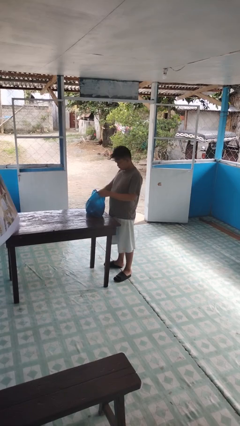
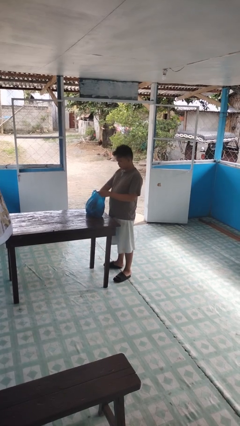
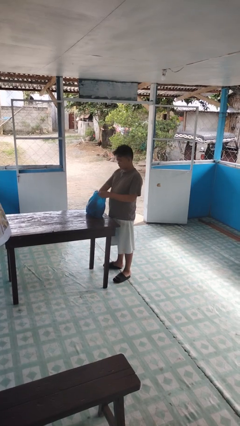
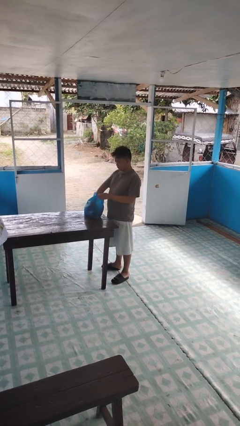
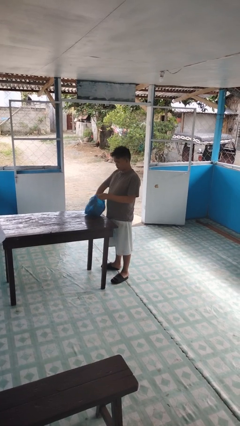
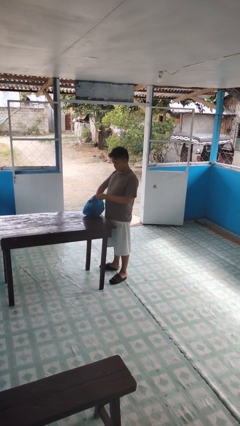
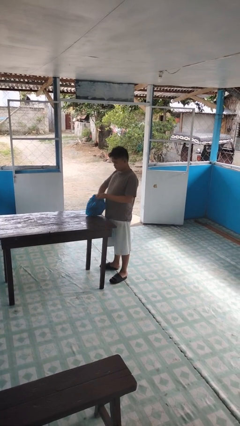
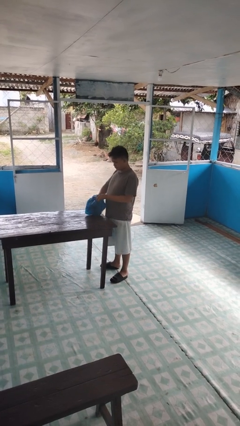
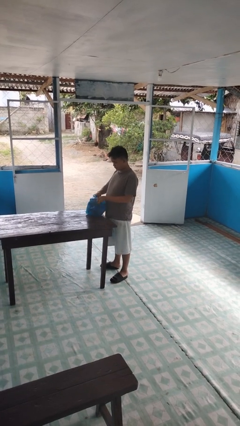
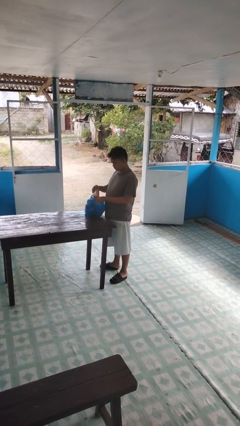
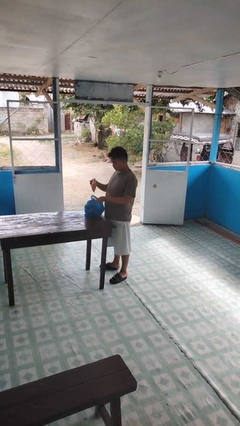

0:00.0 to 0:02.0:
person takes object from bag

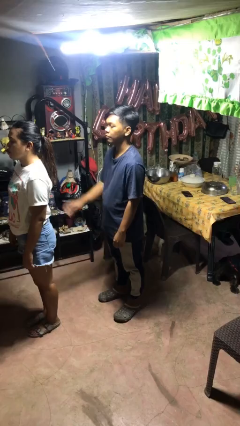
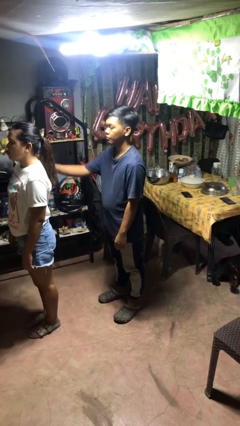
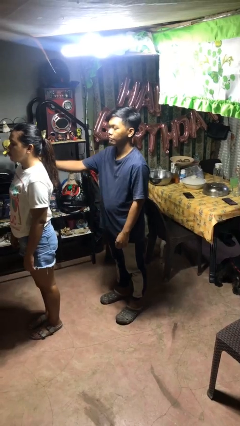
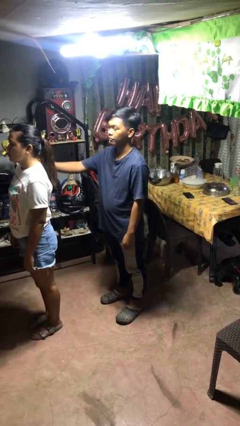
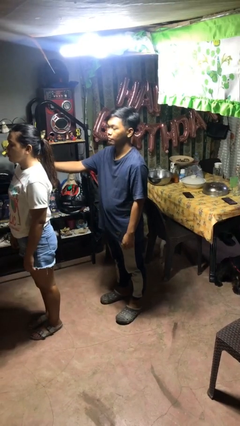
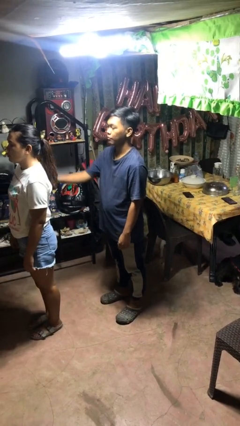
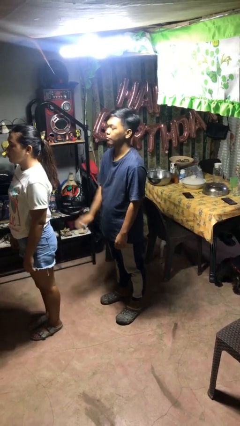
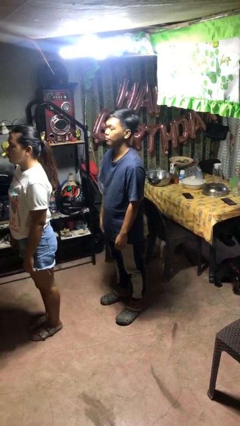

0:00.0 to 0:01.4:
person pounds shoulders of person

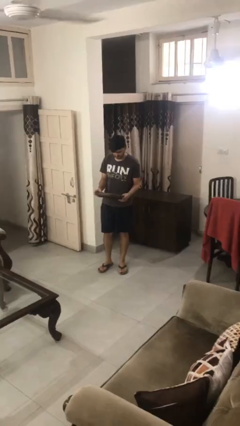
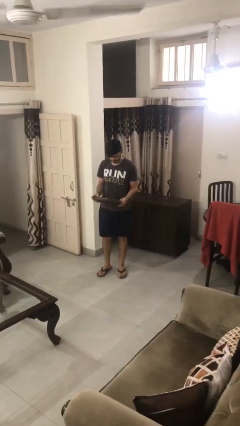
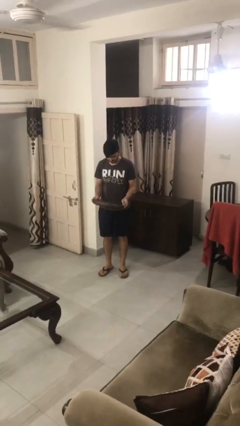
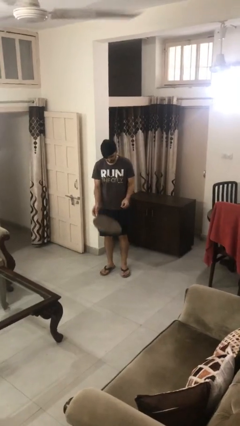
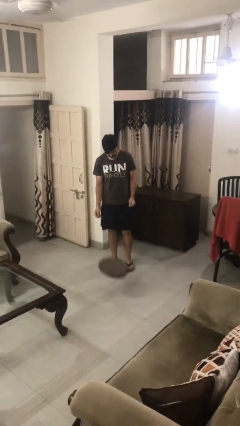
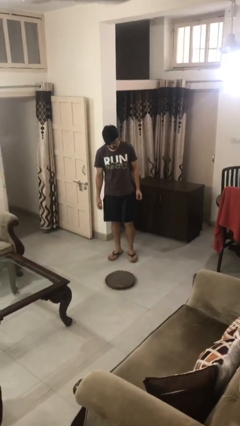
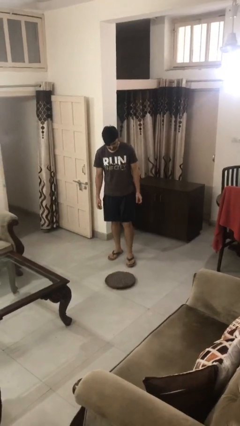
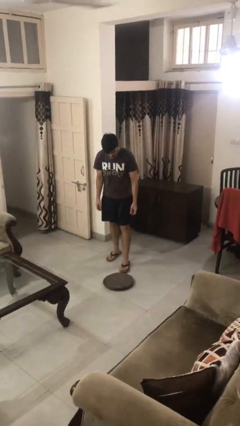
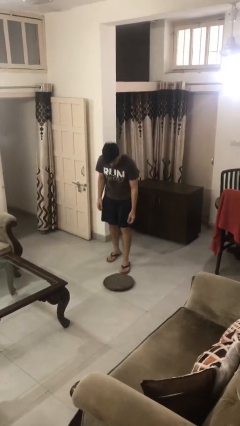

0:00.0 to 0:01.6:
person drops object

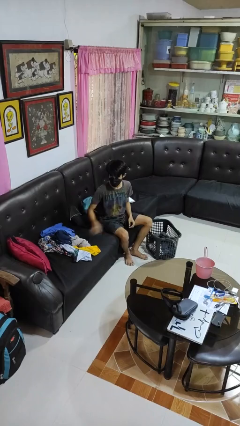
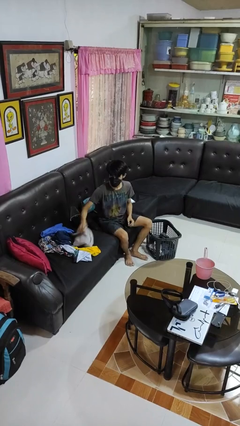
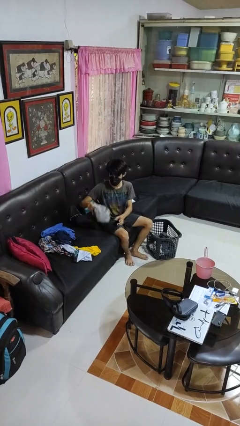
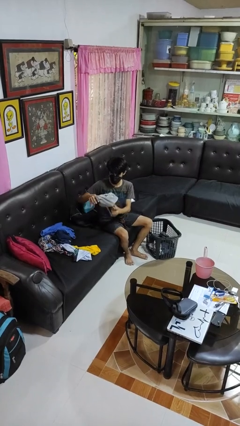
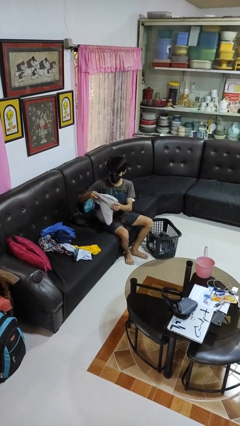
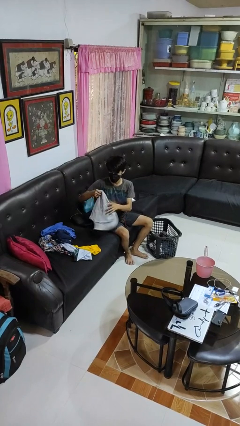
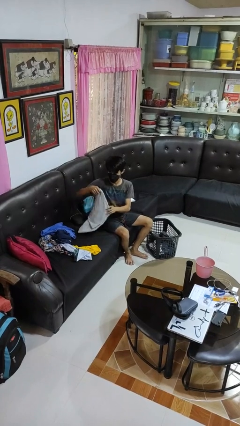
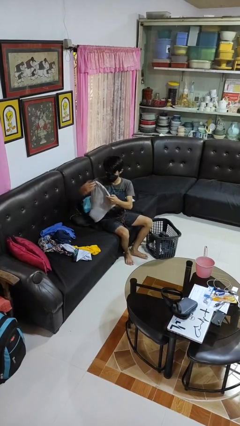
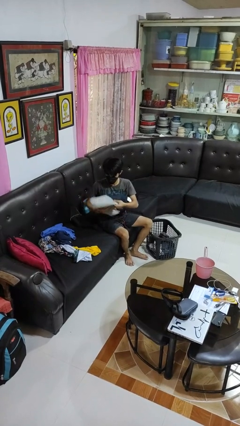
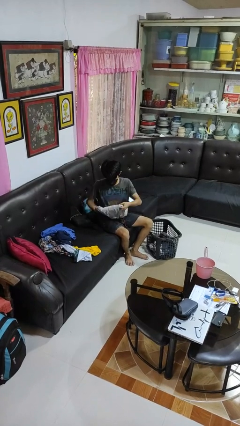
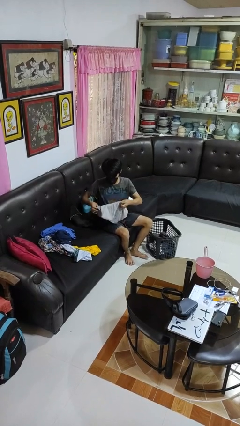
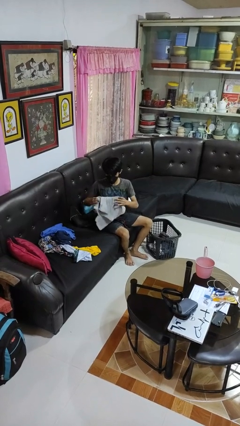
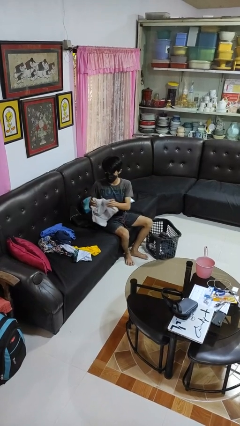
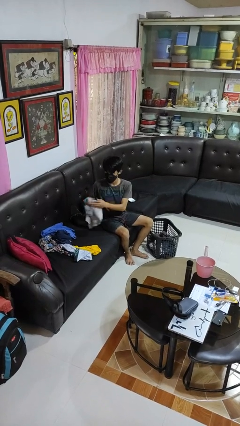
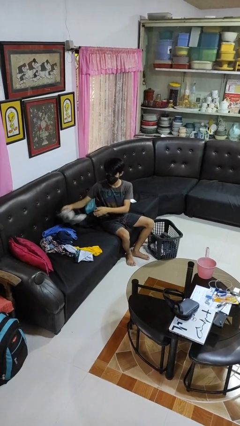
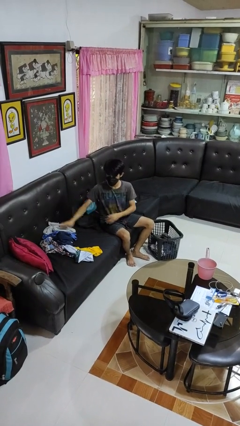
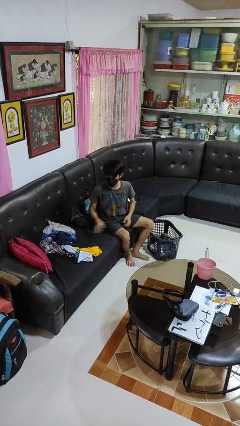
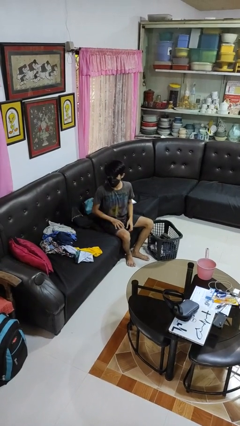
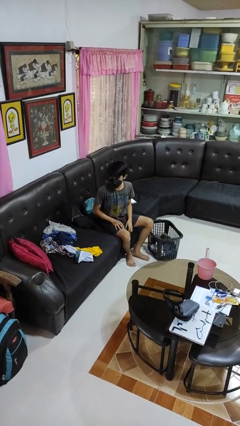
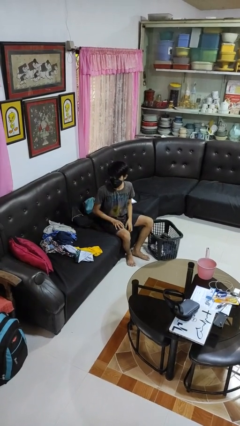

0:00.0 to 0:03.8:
person folds shirt

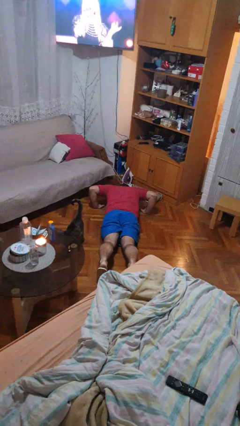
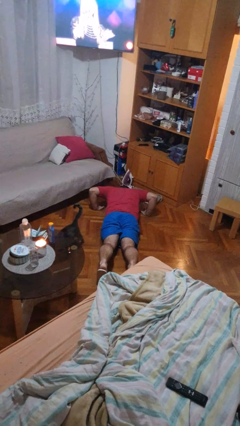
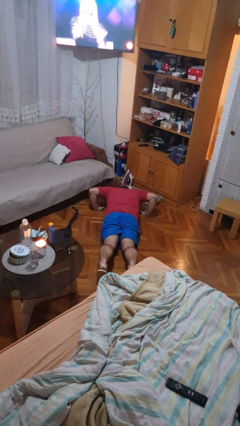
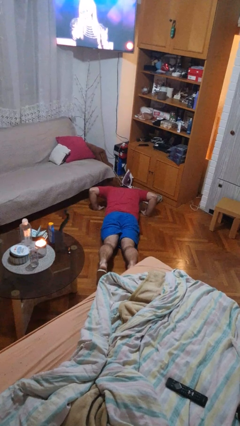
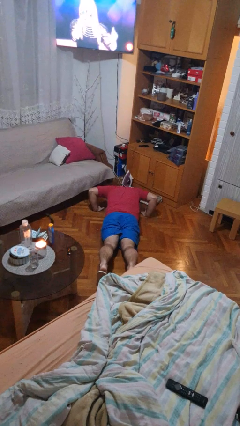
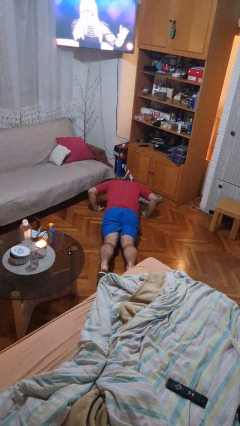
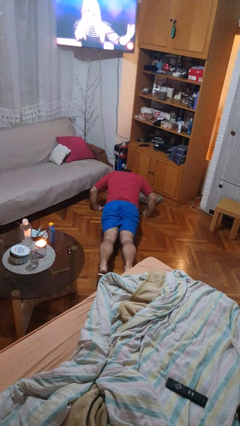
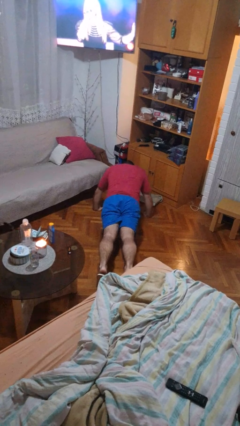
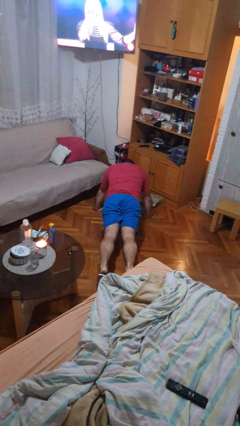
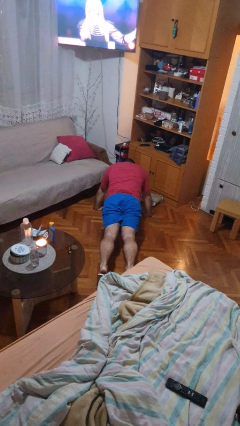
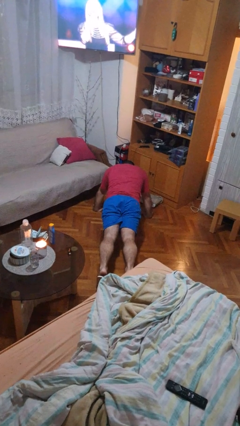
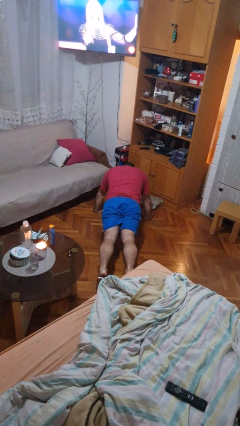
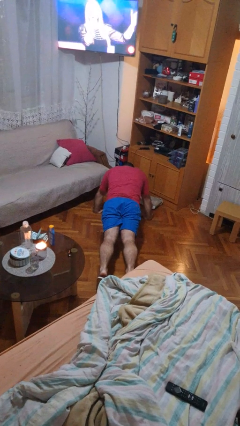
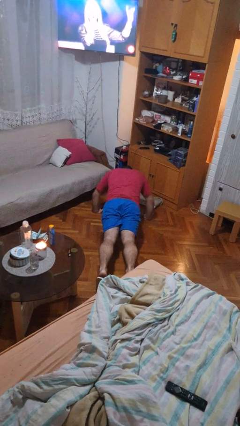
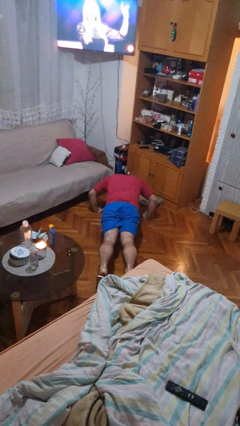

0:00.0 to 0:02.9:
person exercises with pushup

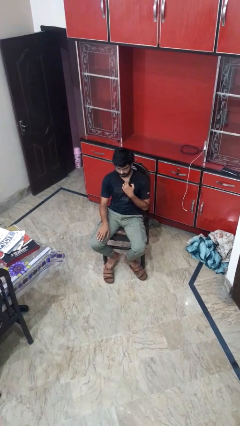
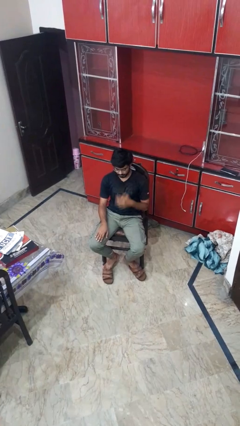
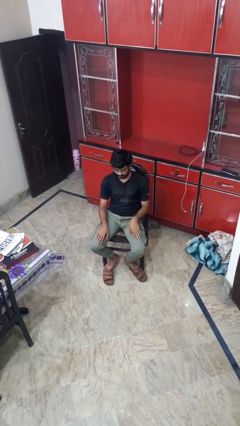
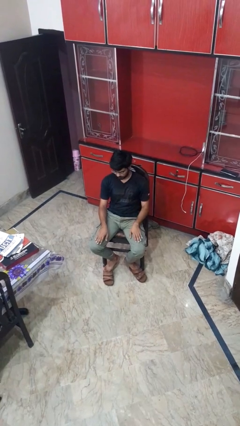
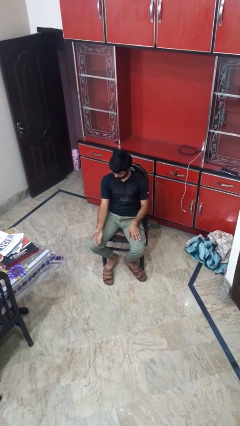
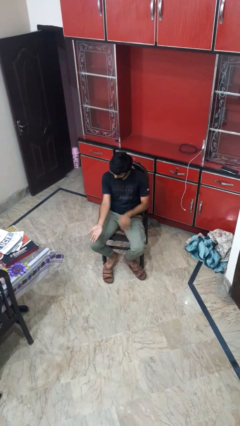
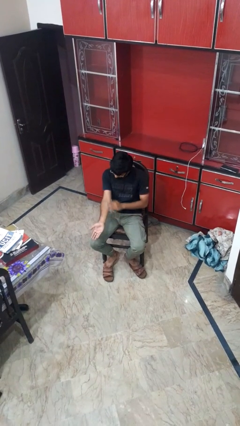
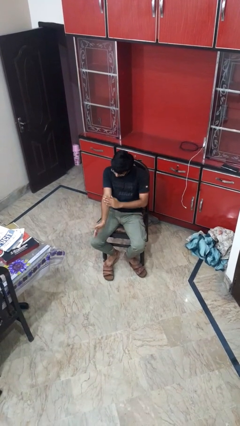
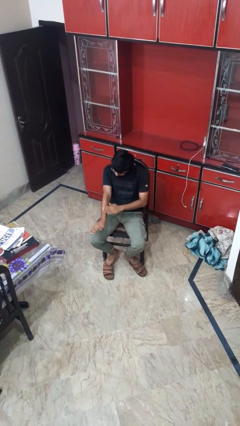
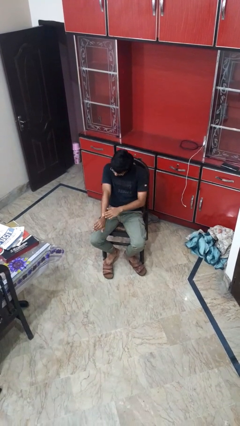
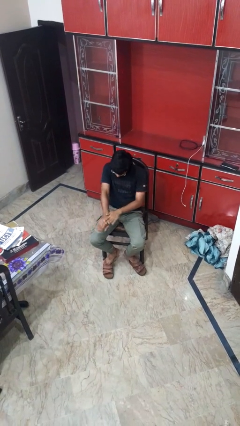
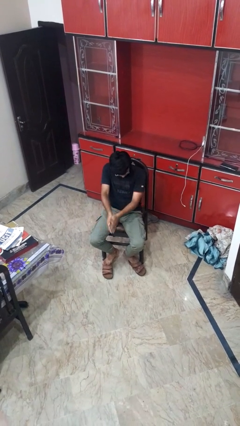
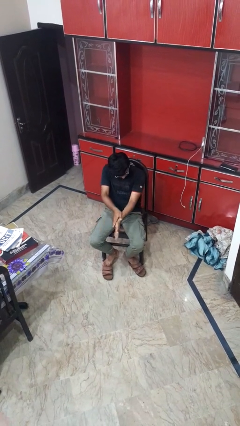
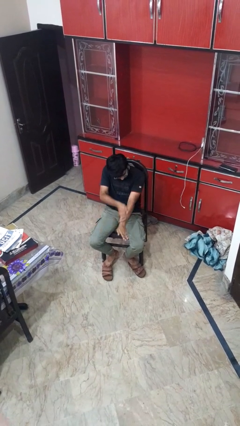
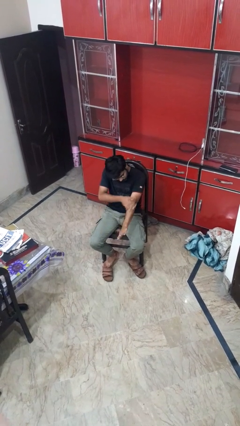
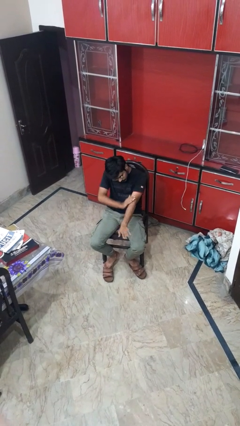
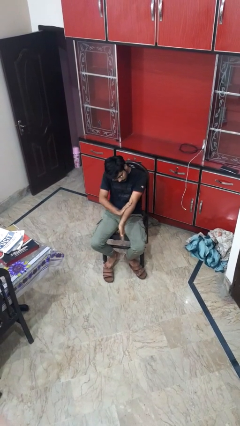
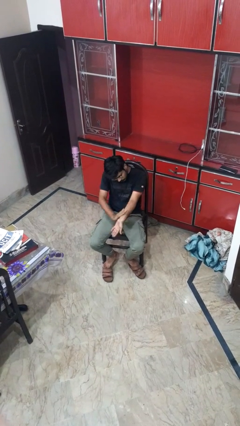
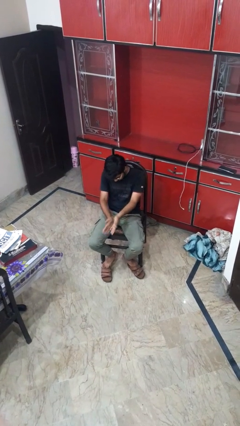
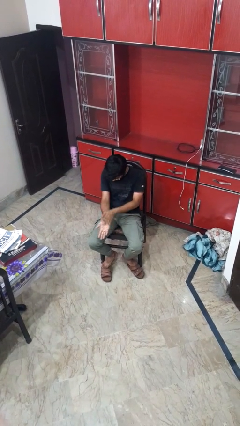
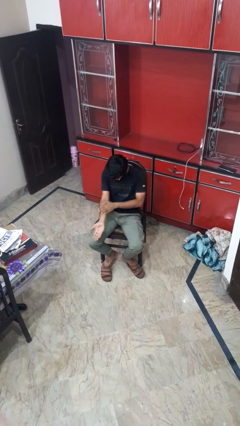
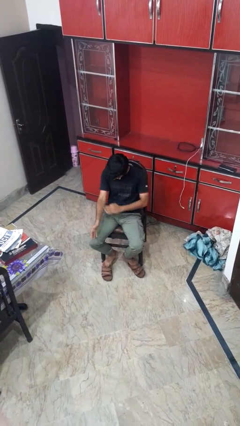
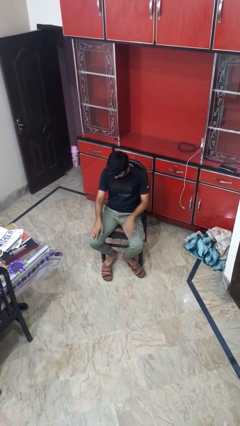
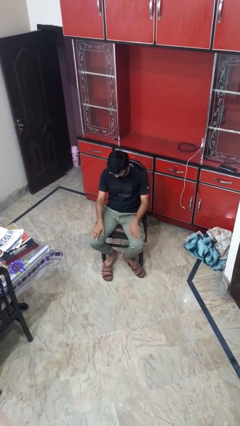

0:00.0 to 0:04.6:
person looks at hands in lap

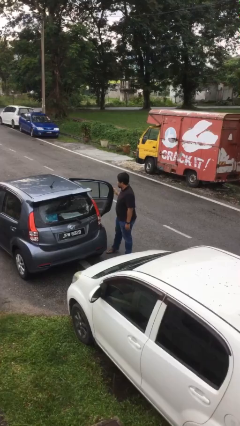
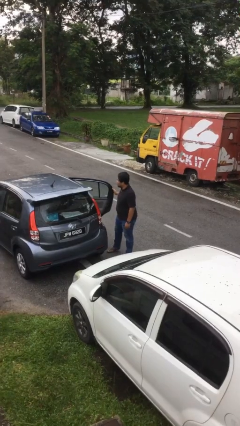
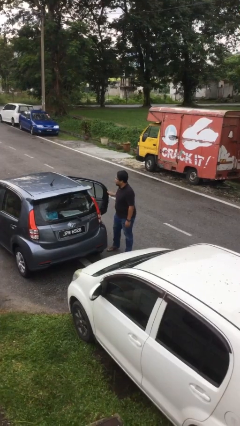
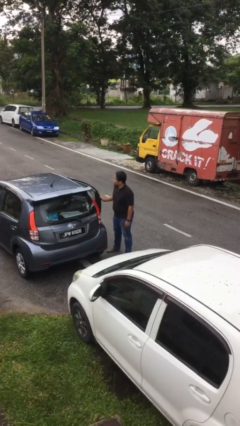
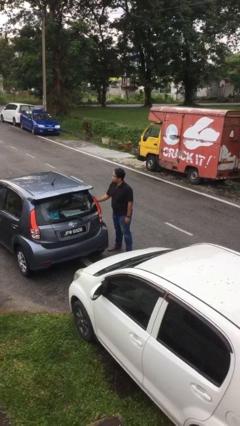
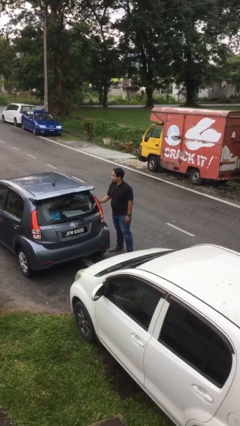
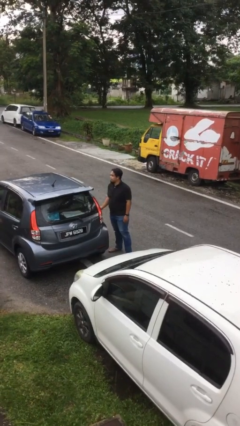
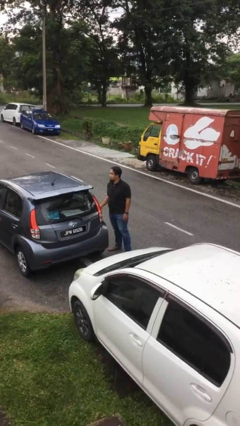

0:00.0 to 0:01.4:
person closes car door
